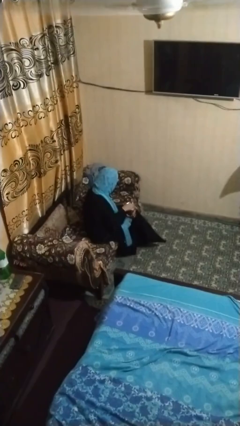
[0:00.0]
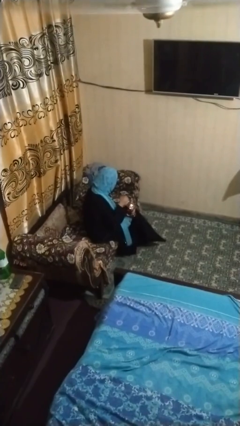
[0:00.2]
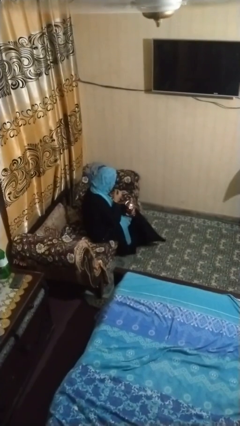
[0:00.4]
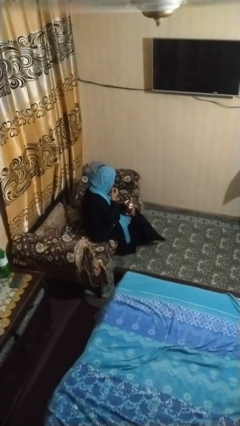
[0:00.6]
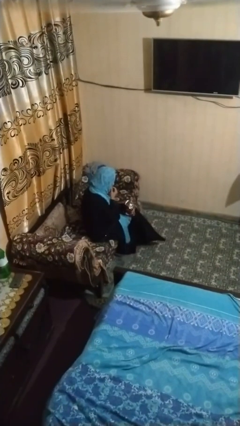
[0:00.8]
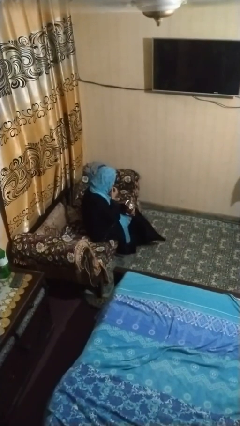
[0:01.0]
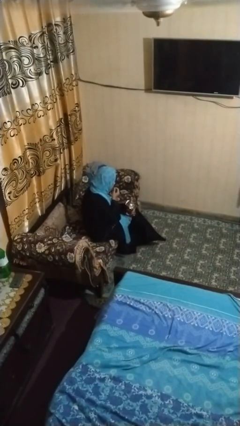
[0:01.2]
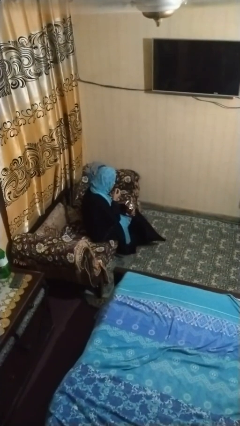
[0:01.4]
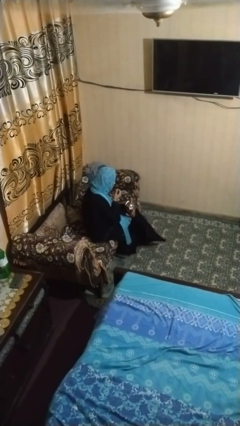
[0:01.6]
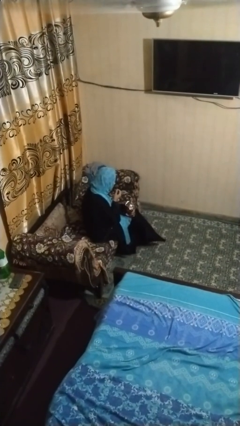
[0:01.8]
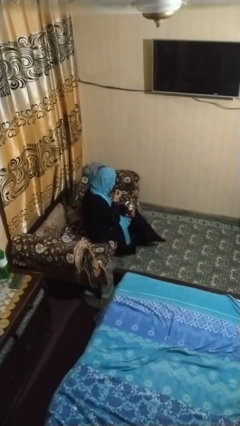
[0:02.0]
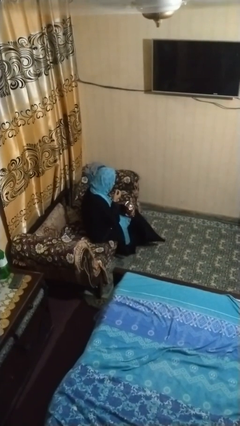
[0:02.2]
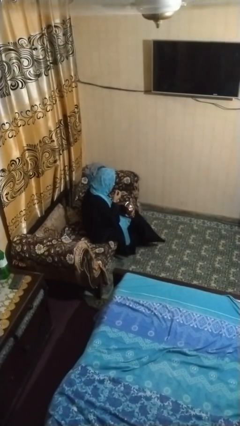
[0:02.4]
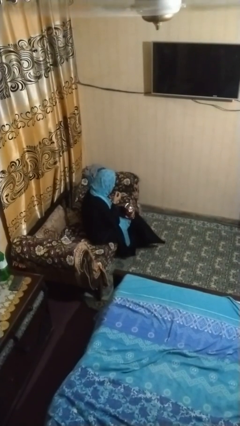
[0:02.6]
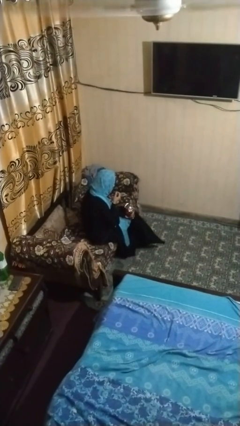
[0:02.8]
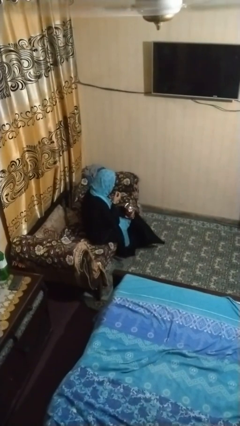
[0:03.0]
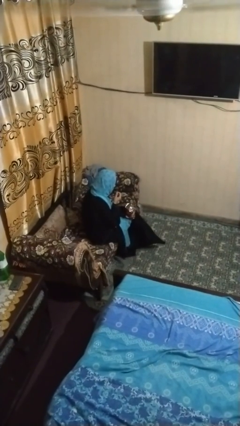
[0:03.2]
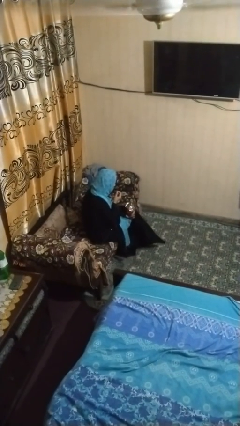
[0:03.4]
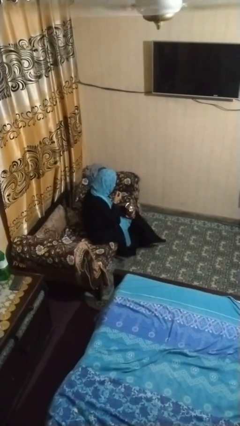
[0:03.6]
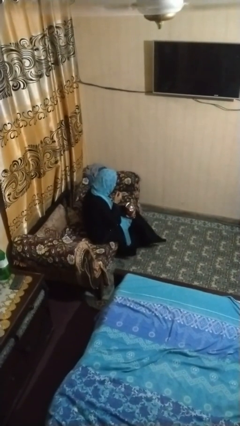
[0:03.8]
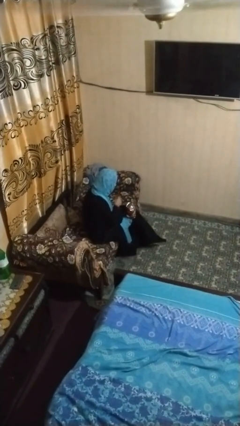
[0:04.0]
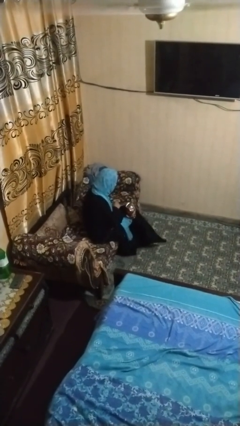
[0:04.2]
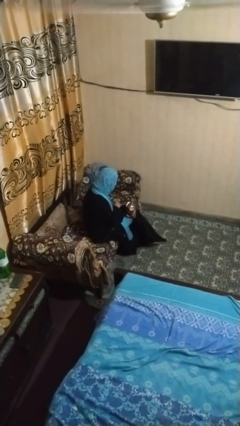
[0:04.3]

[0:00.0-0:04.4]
person eats snack from bag

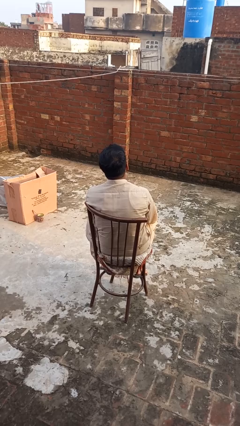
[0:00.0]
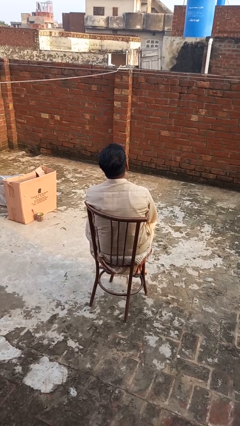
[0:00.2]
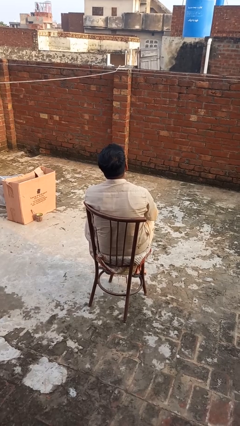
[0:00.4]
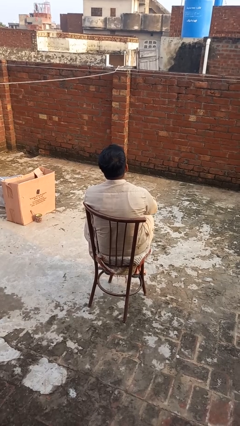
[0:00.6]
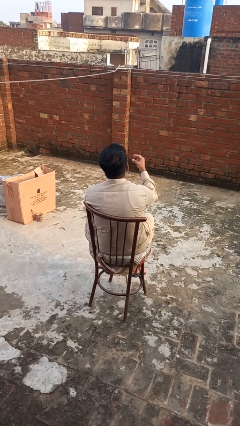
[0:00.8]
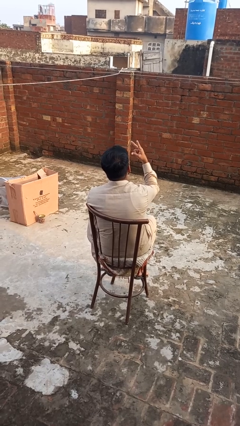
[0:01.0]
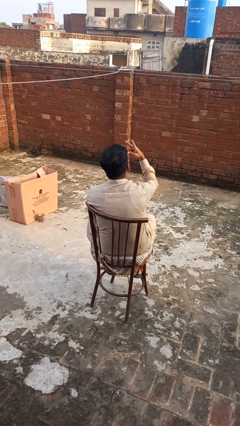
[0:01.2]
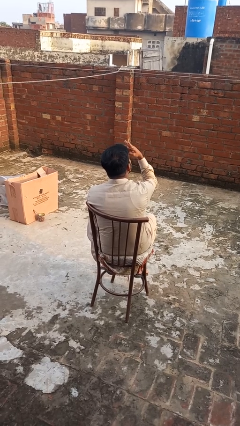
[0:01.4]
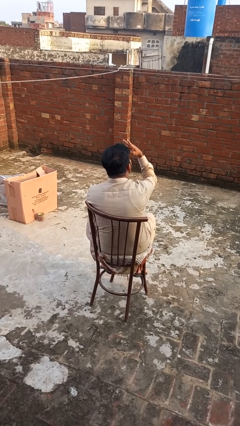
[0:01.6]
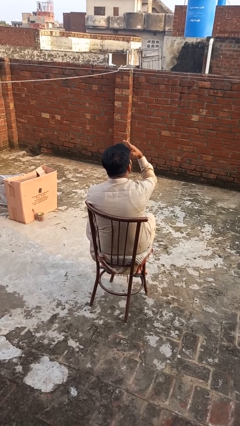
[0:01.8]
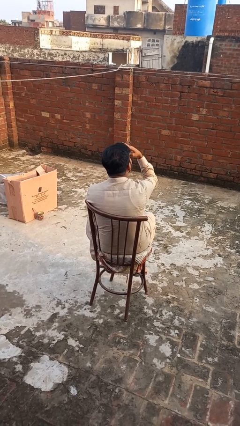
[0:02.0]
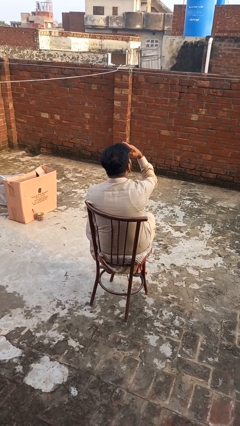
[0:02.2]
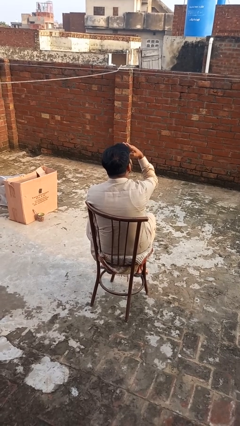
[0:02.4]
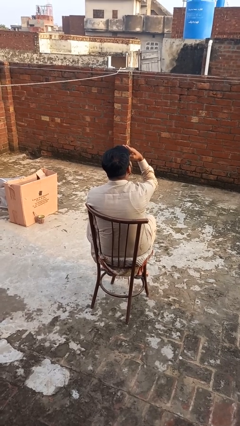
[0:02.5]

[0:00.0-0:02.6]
person gestures watch closely

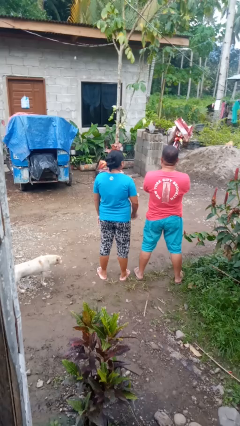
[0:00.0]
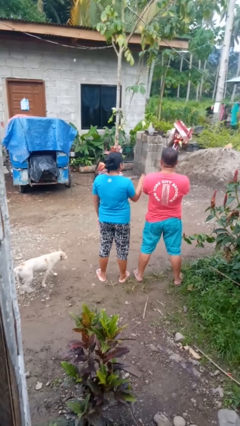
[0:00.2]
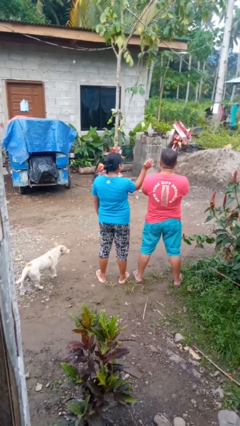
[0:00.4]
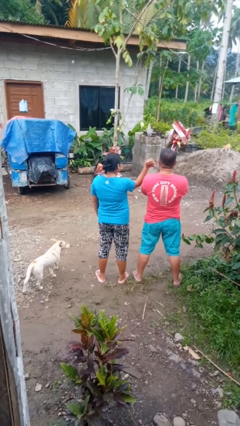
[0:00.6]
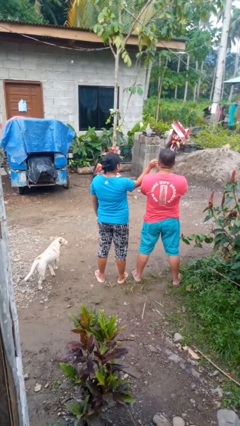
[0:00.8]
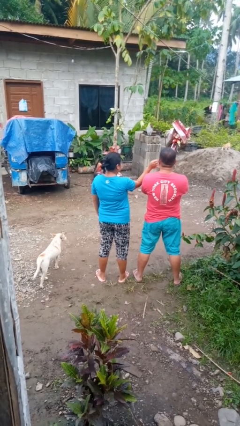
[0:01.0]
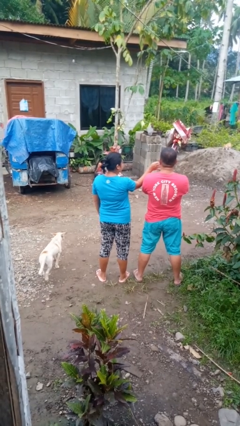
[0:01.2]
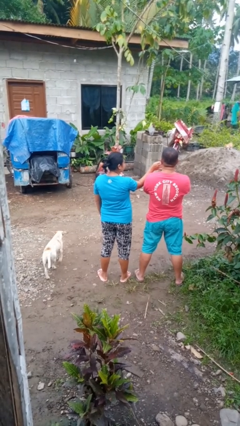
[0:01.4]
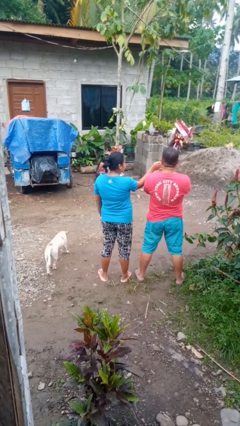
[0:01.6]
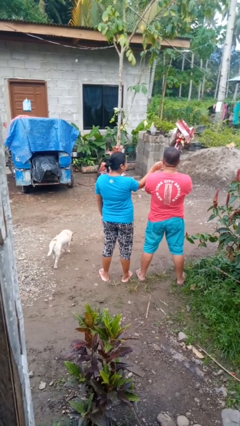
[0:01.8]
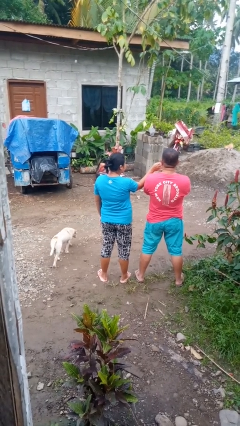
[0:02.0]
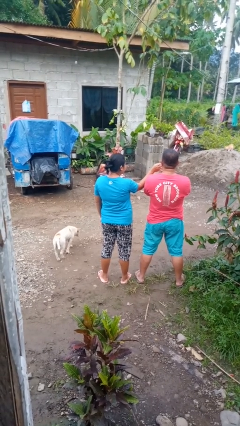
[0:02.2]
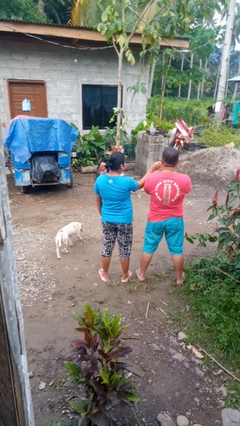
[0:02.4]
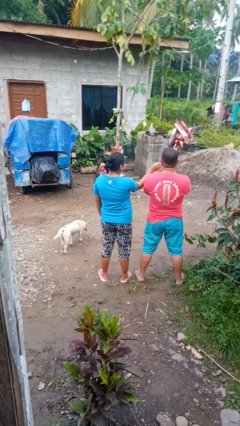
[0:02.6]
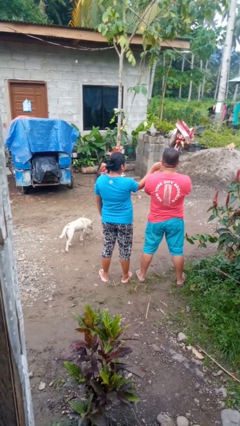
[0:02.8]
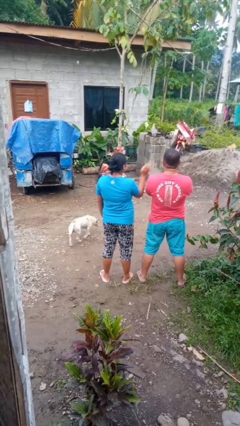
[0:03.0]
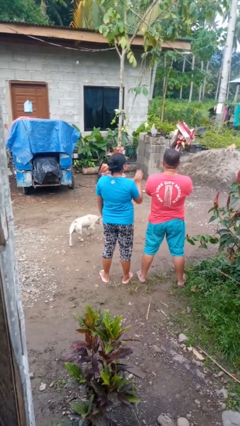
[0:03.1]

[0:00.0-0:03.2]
person touches face of person

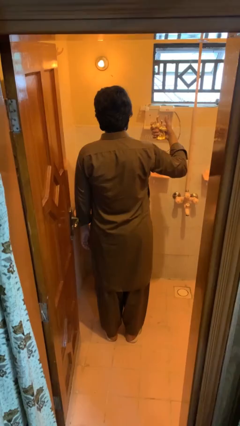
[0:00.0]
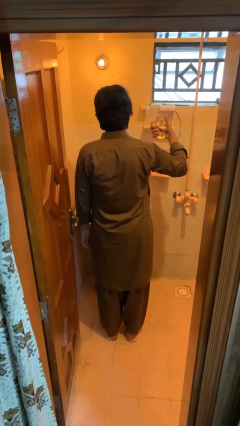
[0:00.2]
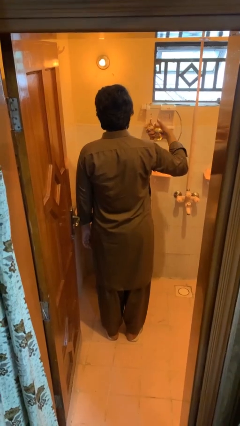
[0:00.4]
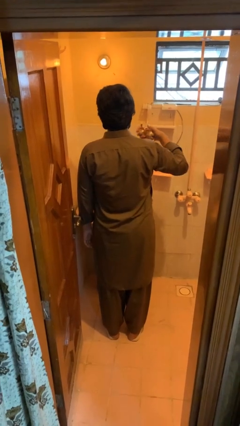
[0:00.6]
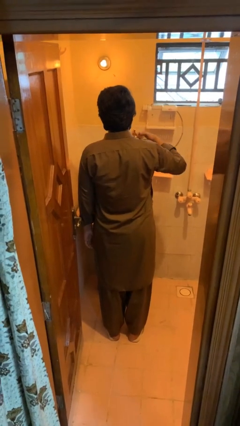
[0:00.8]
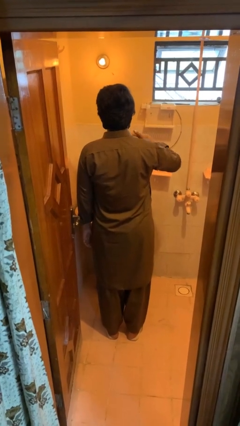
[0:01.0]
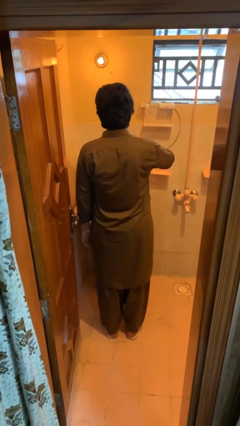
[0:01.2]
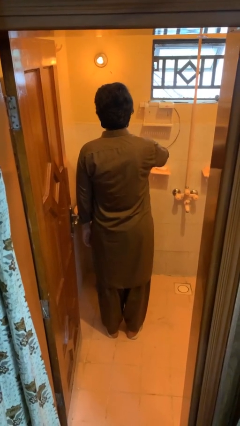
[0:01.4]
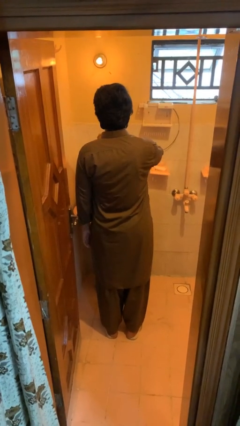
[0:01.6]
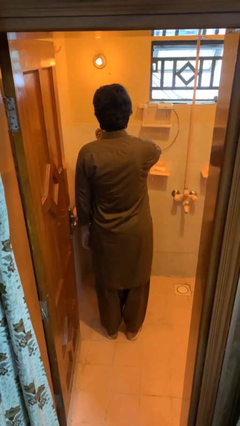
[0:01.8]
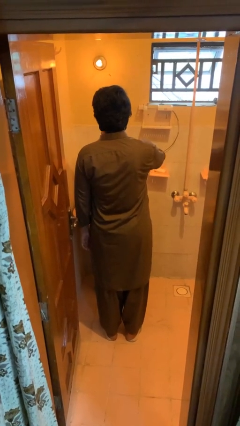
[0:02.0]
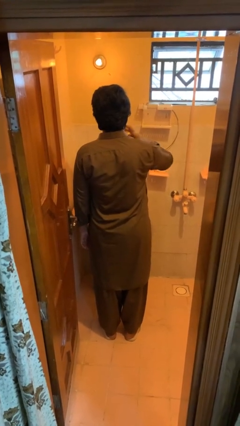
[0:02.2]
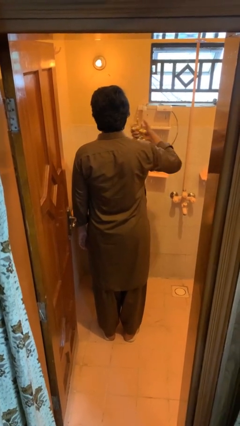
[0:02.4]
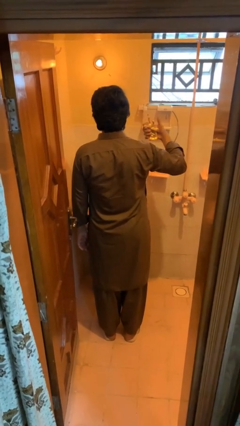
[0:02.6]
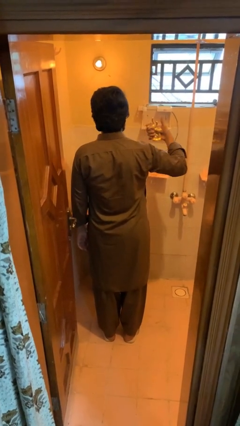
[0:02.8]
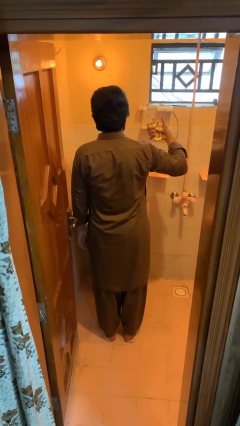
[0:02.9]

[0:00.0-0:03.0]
person applies deodorant

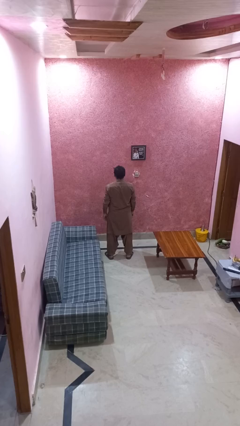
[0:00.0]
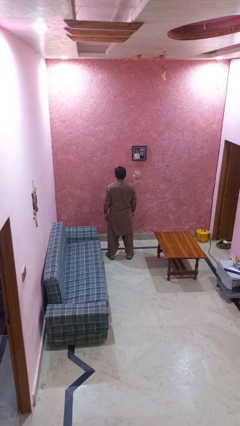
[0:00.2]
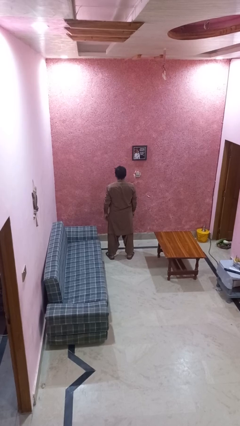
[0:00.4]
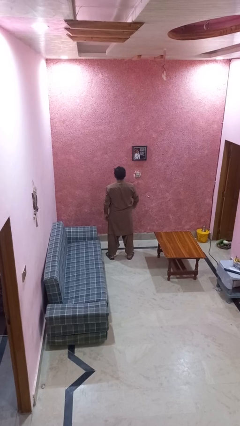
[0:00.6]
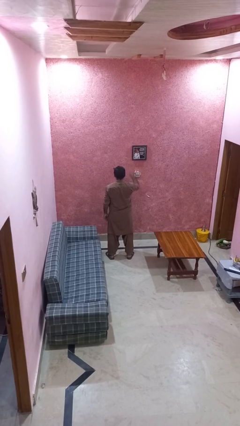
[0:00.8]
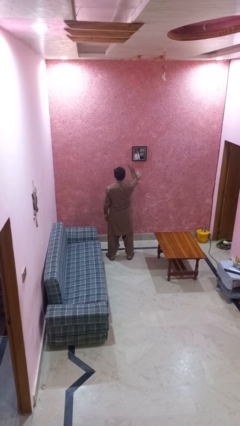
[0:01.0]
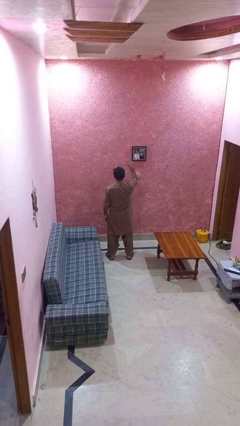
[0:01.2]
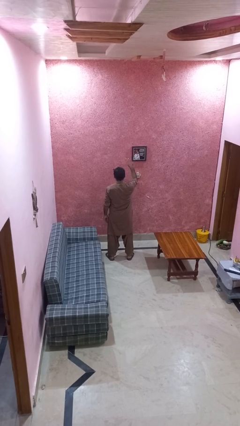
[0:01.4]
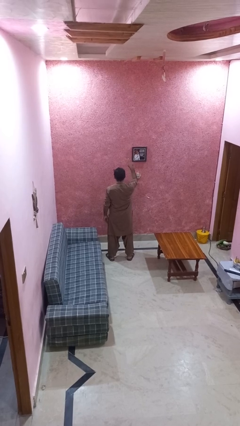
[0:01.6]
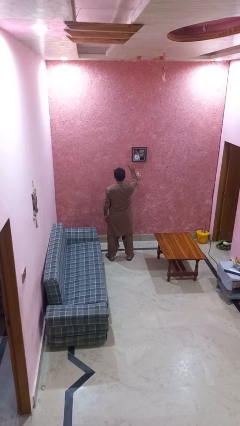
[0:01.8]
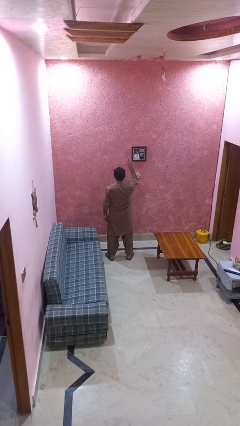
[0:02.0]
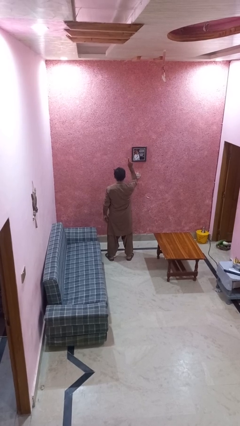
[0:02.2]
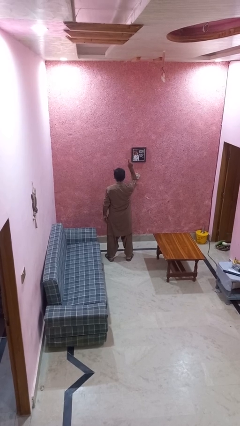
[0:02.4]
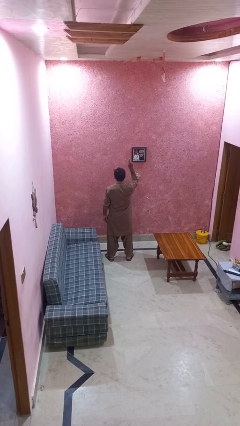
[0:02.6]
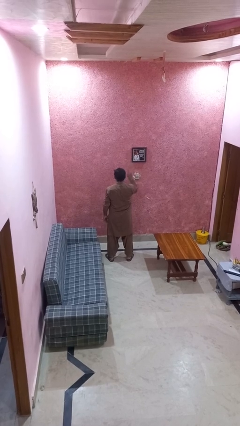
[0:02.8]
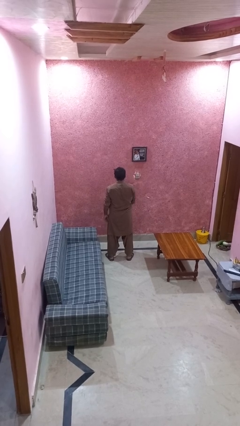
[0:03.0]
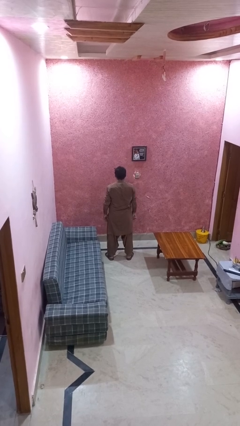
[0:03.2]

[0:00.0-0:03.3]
person gestures number one

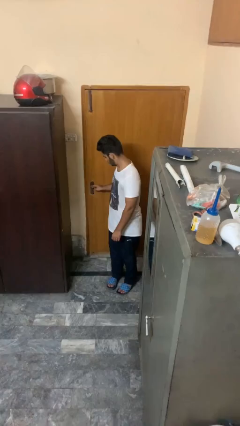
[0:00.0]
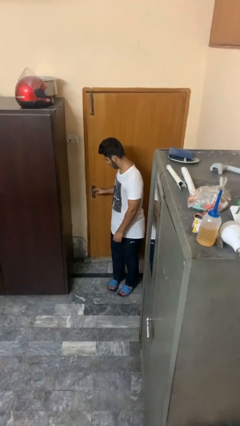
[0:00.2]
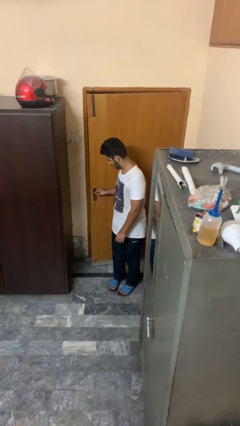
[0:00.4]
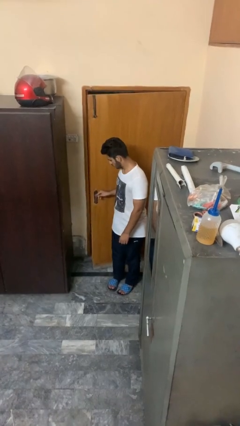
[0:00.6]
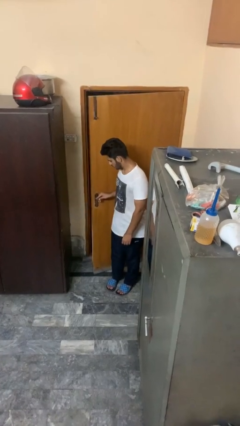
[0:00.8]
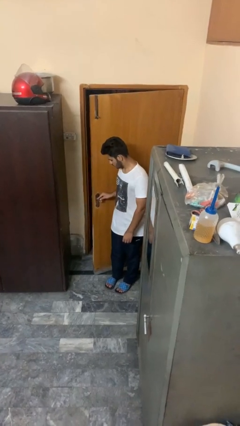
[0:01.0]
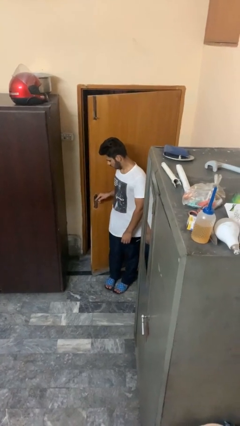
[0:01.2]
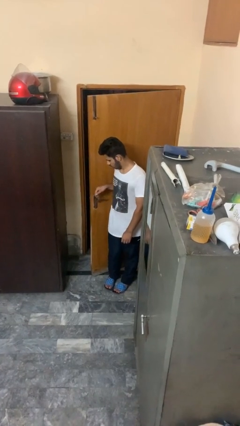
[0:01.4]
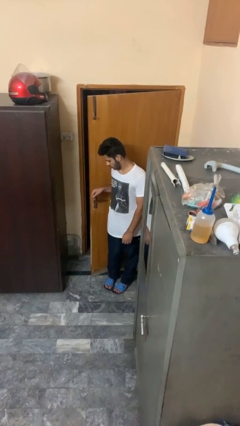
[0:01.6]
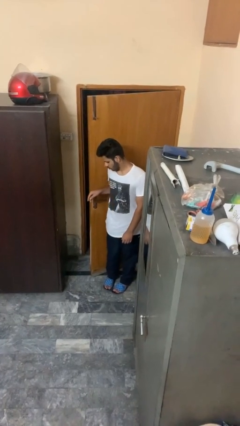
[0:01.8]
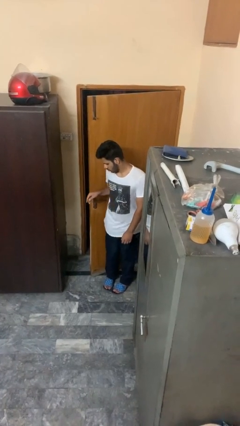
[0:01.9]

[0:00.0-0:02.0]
person opens facility door
